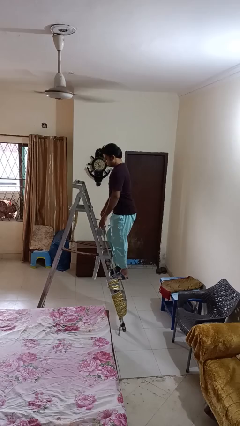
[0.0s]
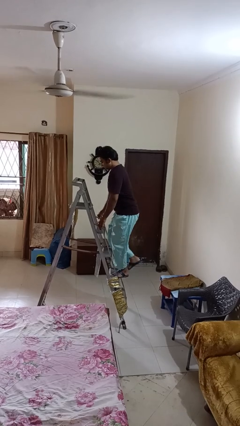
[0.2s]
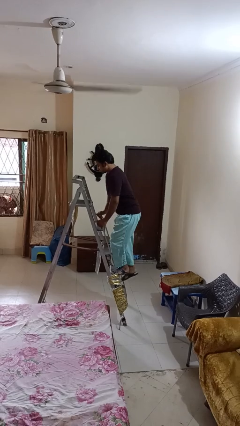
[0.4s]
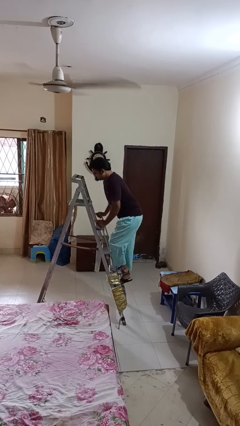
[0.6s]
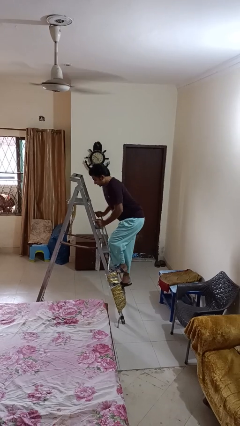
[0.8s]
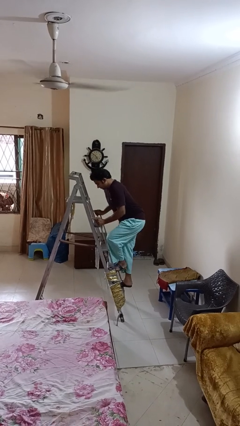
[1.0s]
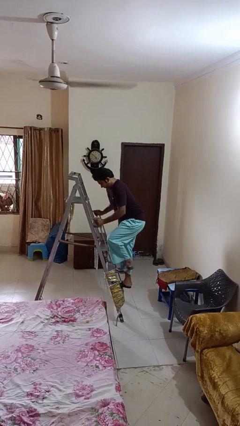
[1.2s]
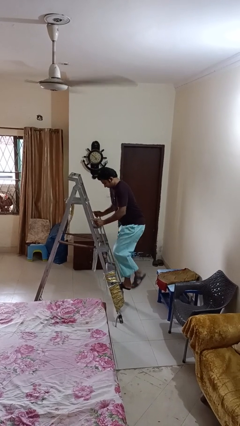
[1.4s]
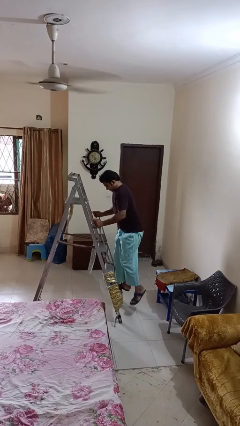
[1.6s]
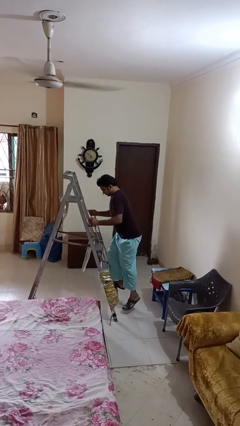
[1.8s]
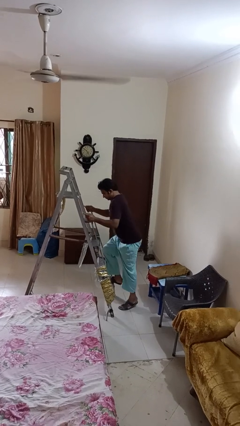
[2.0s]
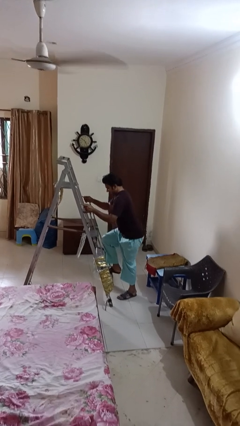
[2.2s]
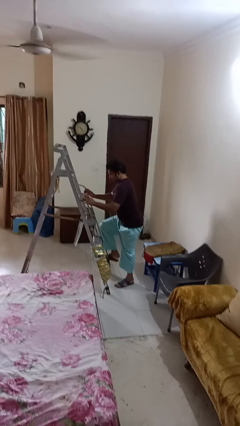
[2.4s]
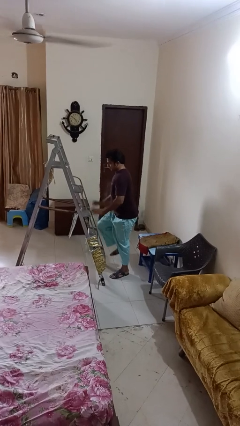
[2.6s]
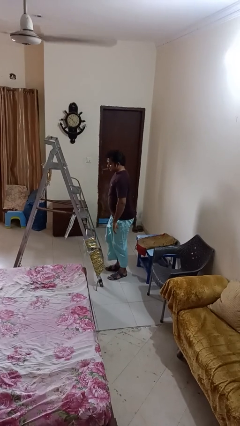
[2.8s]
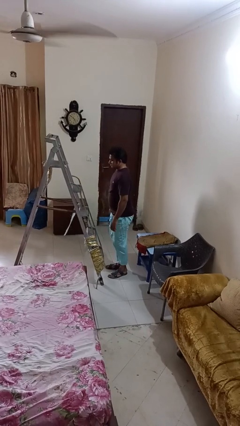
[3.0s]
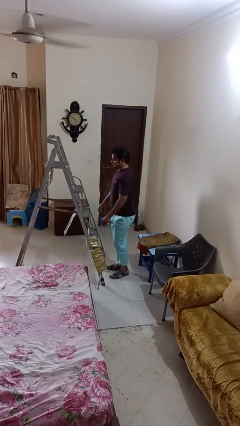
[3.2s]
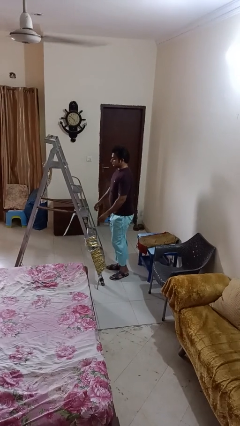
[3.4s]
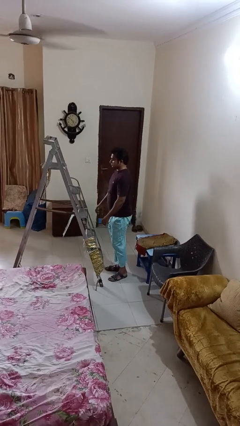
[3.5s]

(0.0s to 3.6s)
person climbs down ladder

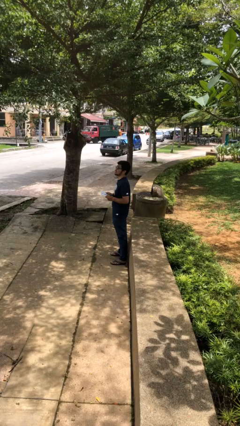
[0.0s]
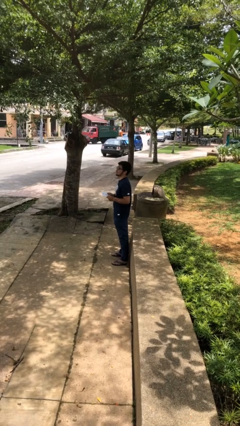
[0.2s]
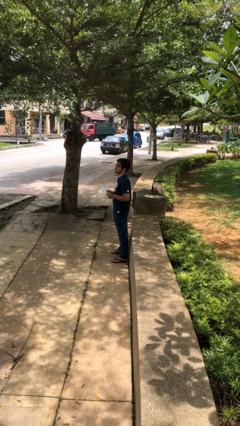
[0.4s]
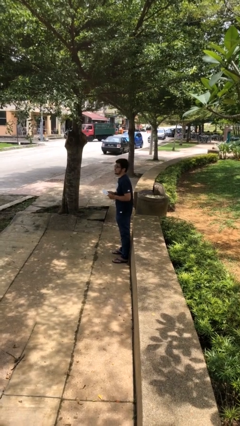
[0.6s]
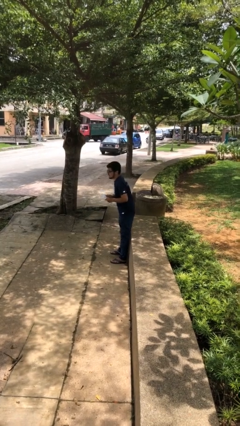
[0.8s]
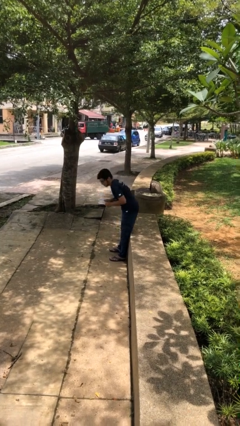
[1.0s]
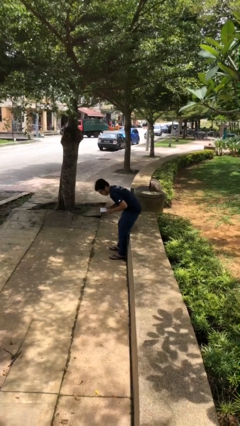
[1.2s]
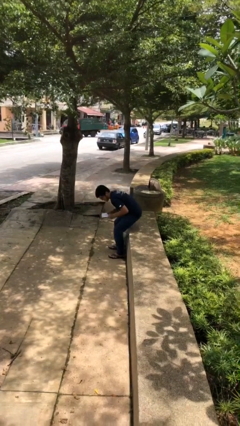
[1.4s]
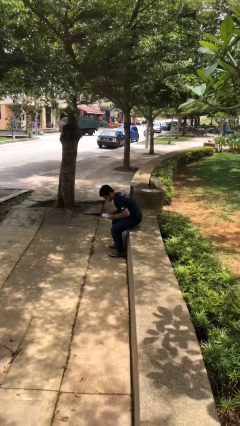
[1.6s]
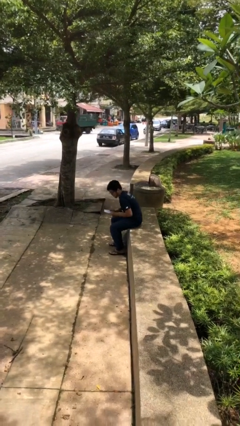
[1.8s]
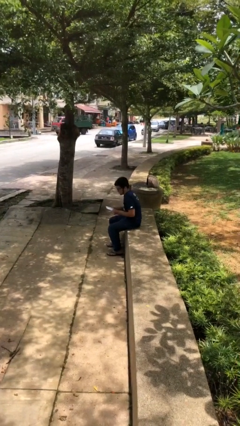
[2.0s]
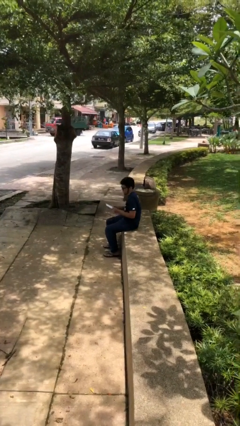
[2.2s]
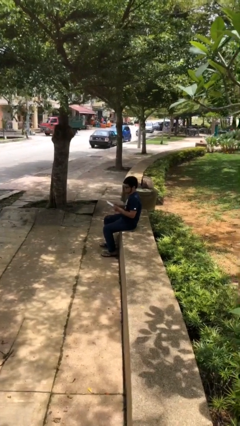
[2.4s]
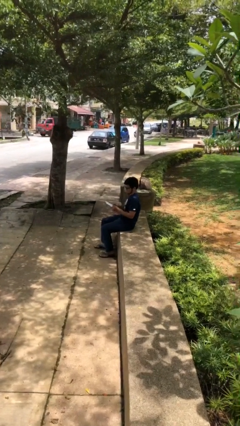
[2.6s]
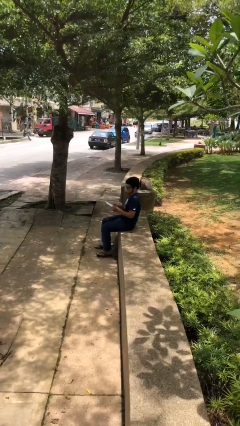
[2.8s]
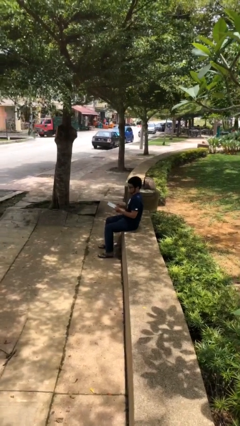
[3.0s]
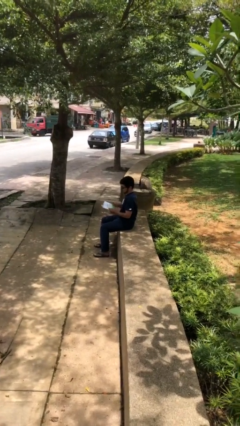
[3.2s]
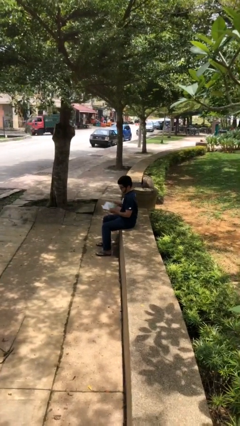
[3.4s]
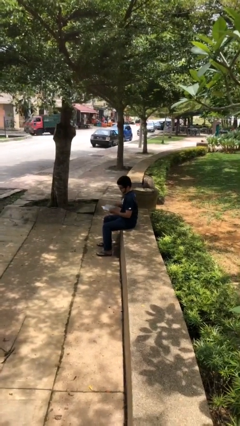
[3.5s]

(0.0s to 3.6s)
person sits down

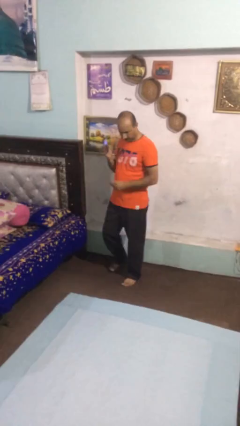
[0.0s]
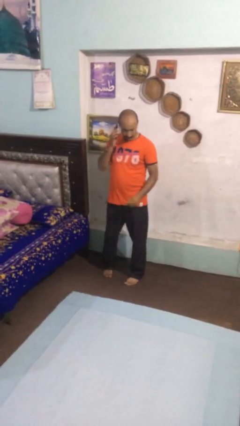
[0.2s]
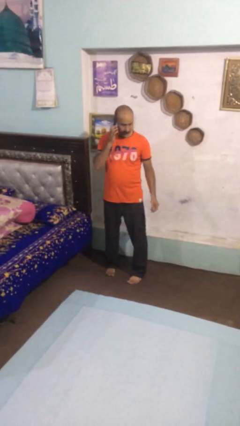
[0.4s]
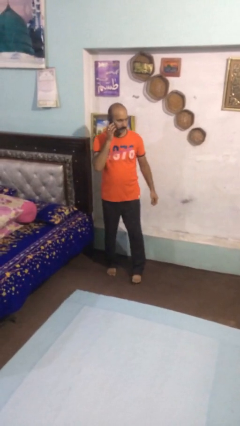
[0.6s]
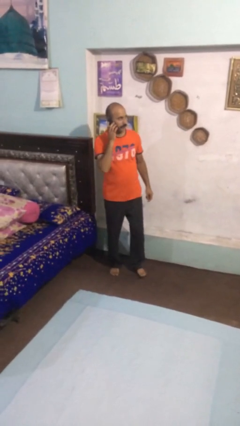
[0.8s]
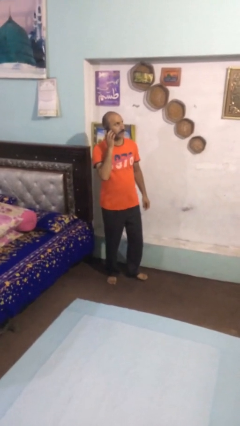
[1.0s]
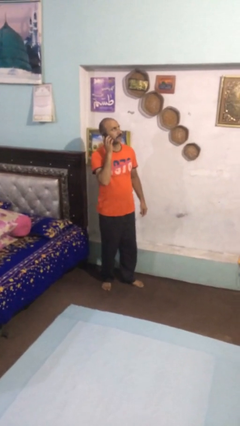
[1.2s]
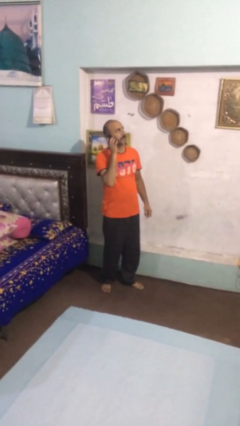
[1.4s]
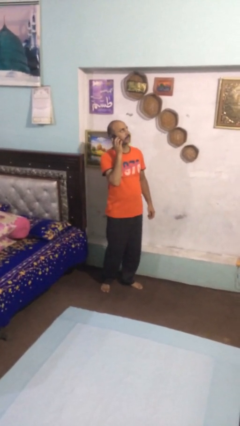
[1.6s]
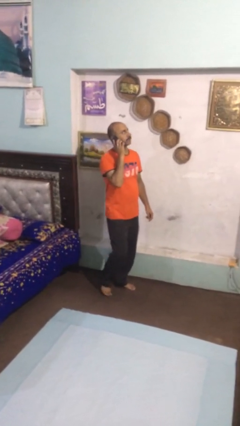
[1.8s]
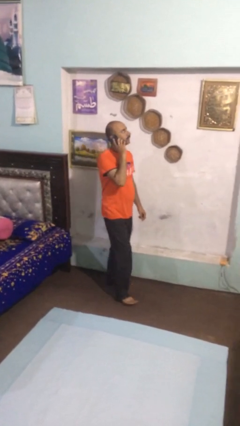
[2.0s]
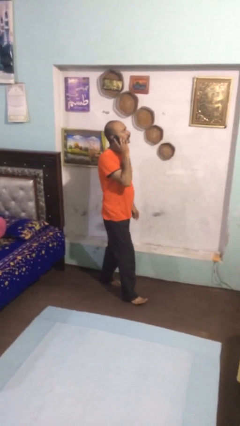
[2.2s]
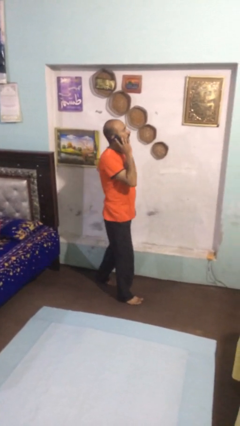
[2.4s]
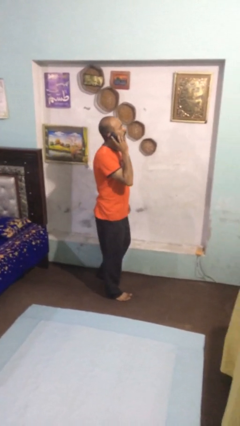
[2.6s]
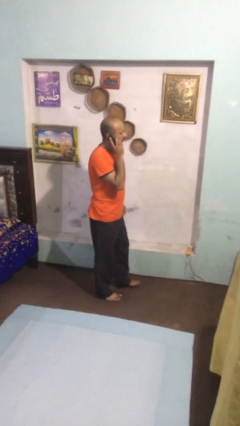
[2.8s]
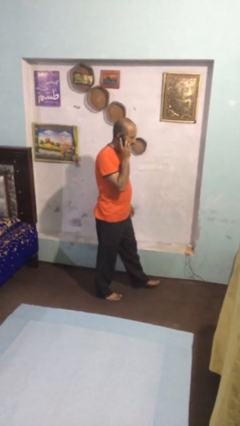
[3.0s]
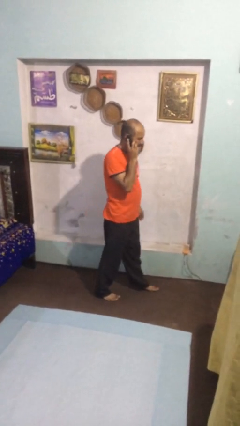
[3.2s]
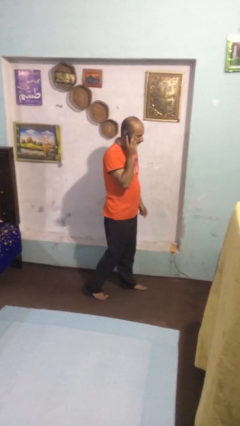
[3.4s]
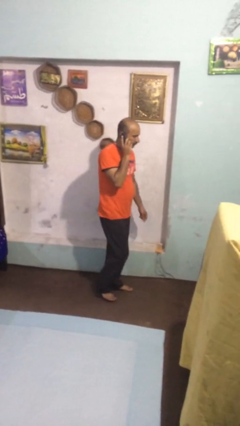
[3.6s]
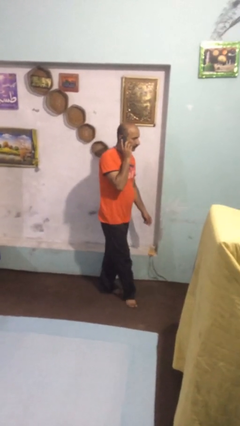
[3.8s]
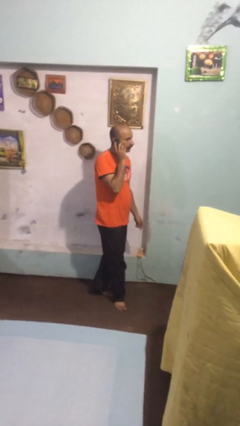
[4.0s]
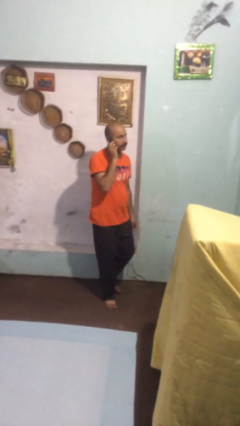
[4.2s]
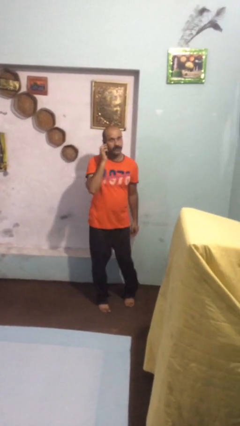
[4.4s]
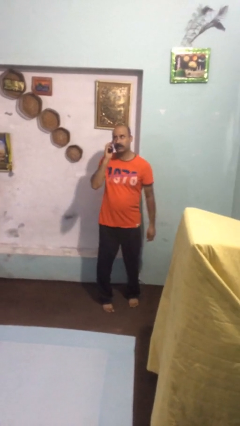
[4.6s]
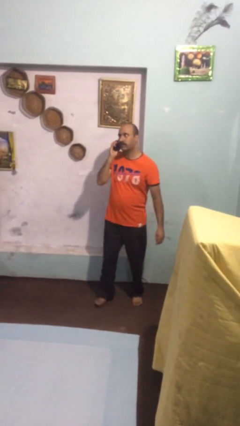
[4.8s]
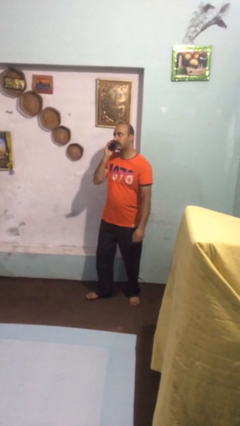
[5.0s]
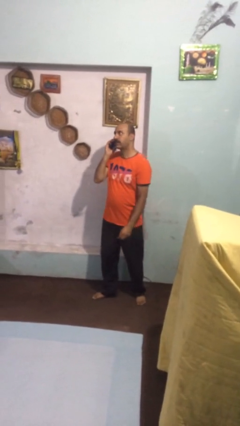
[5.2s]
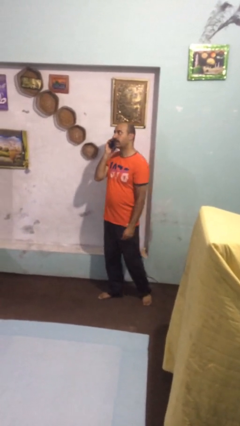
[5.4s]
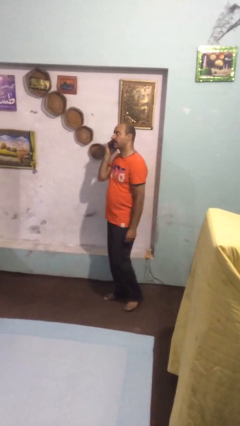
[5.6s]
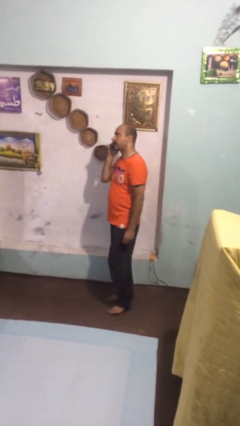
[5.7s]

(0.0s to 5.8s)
person talks on phone

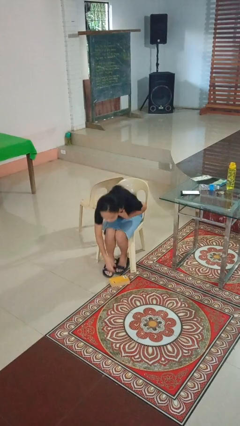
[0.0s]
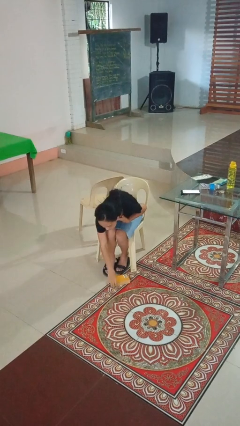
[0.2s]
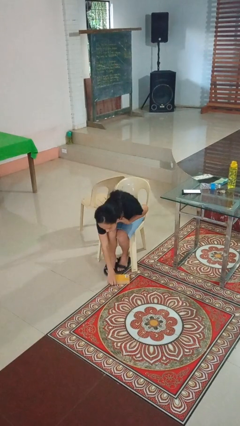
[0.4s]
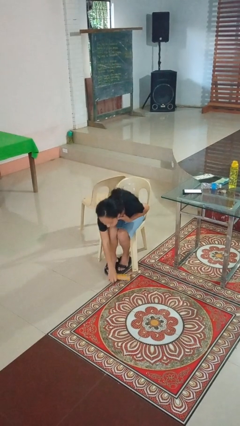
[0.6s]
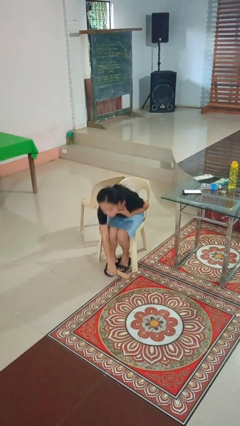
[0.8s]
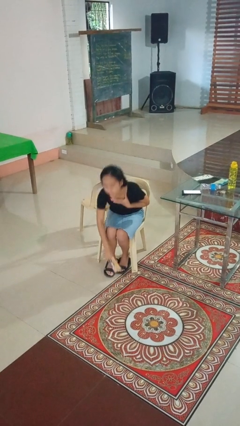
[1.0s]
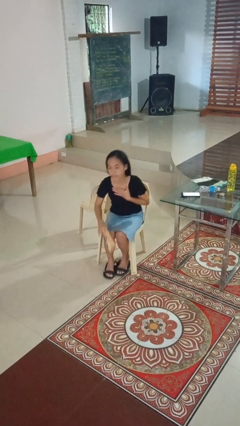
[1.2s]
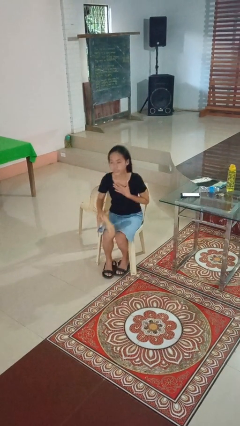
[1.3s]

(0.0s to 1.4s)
person picks up object from floor

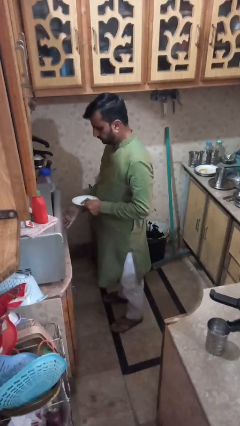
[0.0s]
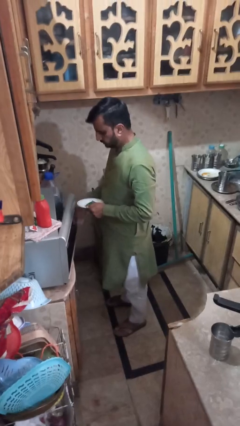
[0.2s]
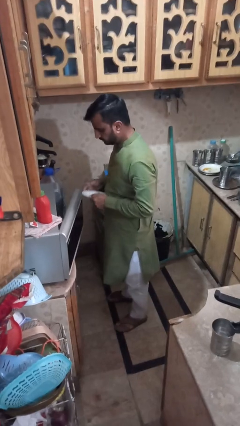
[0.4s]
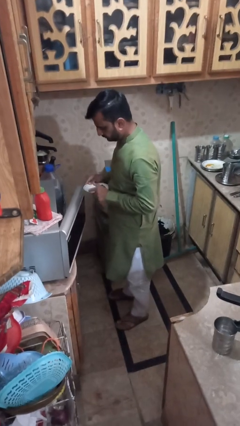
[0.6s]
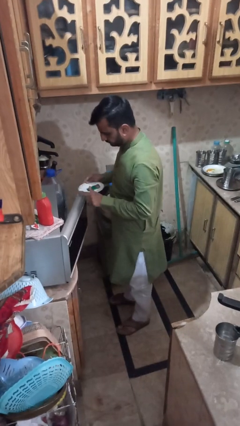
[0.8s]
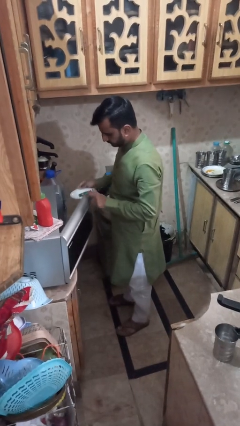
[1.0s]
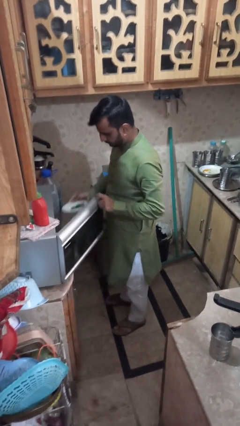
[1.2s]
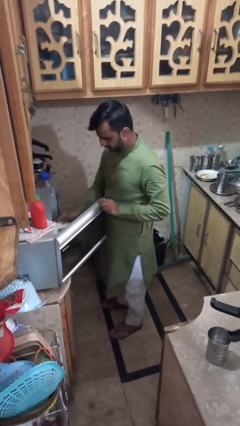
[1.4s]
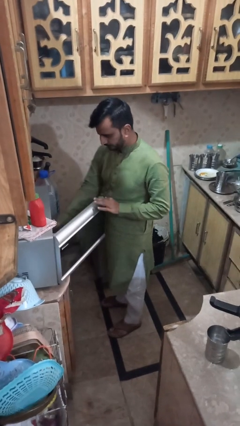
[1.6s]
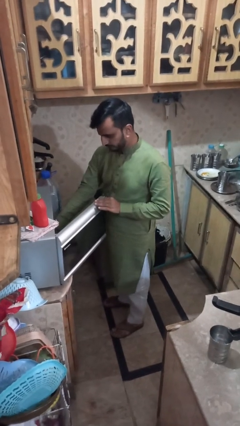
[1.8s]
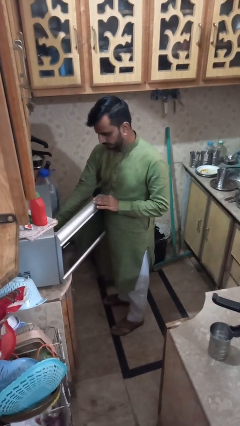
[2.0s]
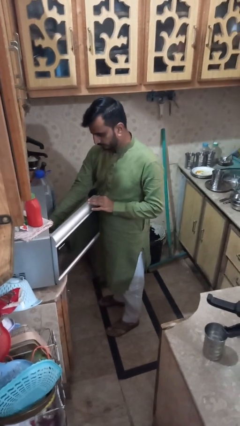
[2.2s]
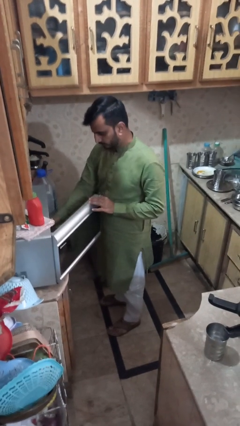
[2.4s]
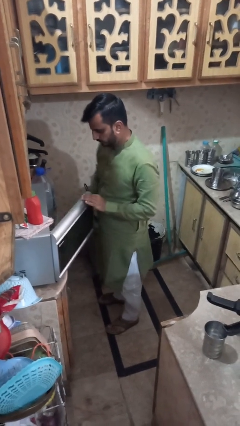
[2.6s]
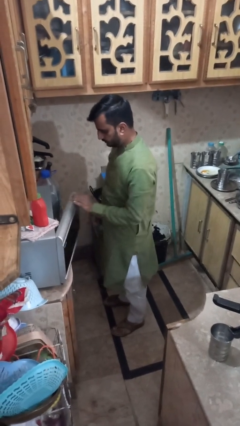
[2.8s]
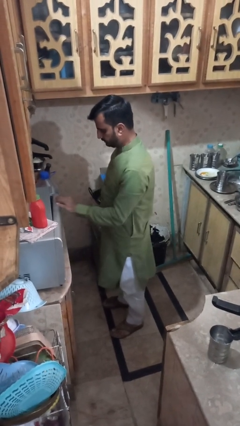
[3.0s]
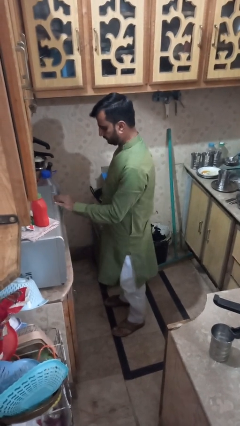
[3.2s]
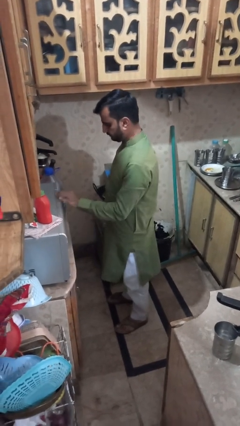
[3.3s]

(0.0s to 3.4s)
person puts object into microwave
